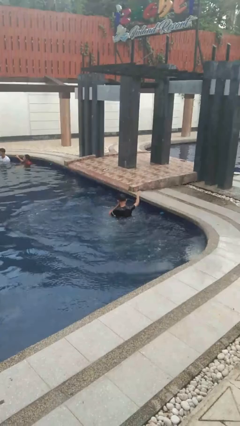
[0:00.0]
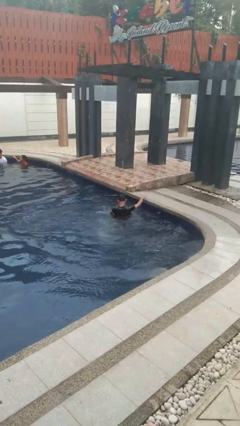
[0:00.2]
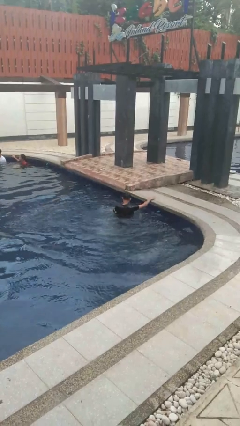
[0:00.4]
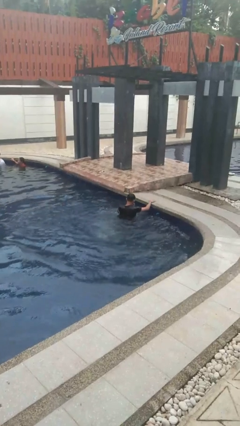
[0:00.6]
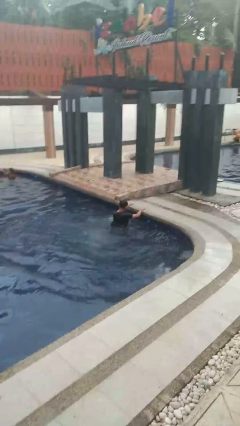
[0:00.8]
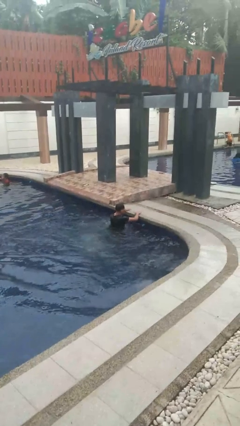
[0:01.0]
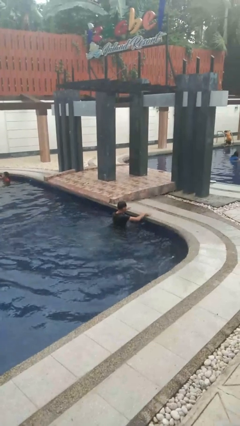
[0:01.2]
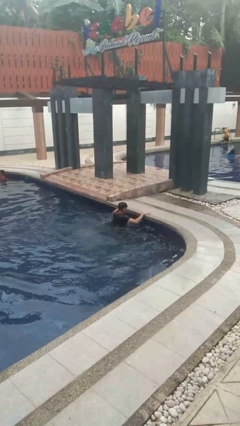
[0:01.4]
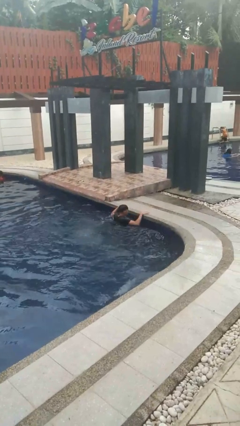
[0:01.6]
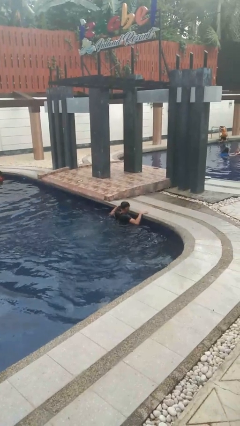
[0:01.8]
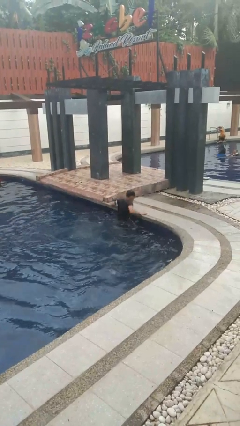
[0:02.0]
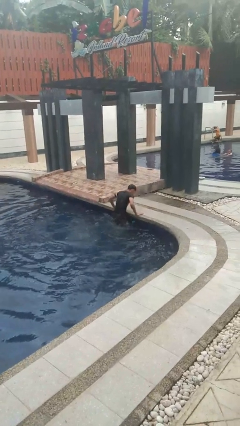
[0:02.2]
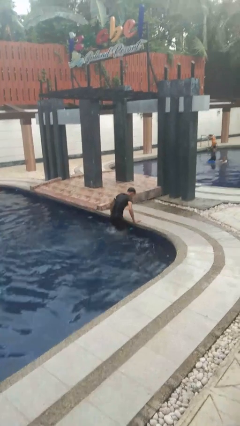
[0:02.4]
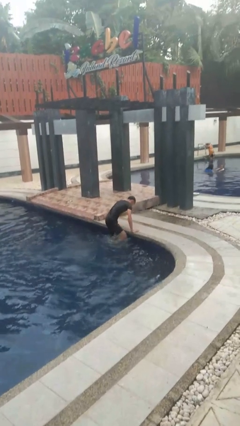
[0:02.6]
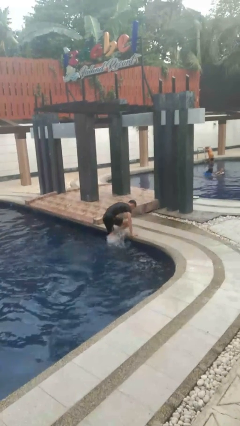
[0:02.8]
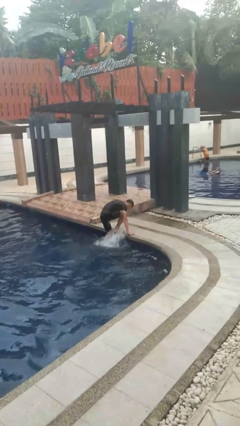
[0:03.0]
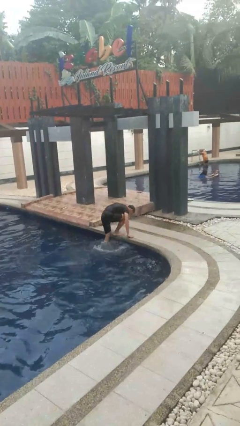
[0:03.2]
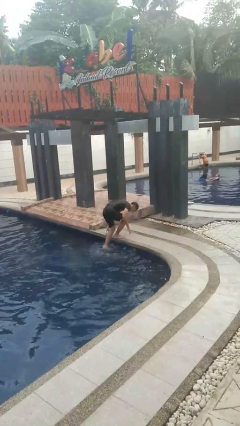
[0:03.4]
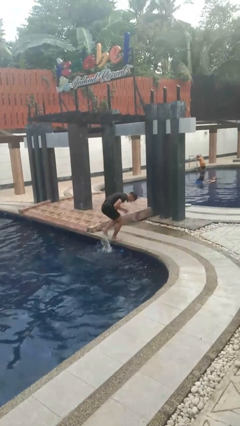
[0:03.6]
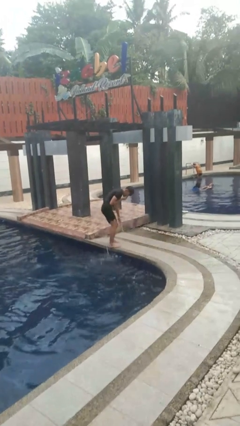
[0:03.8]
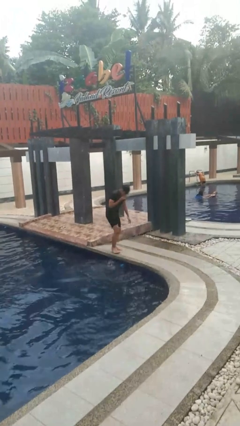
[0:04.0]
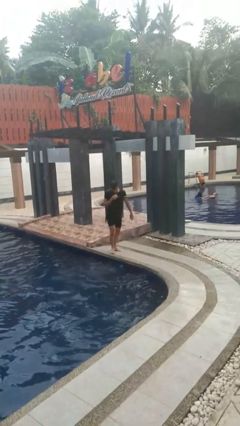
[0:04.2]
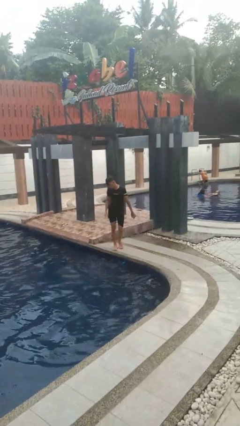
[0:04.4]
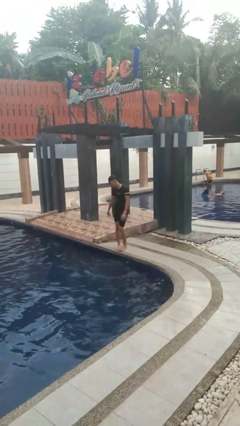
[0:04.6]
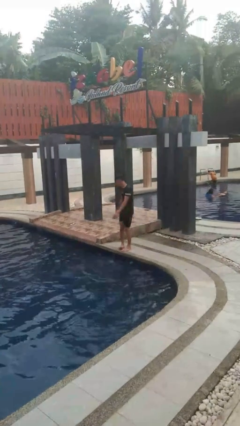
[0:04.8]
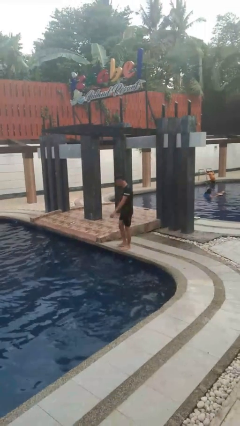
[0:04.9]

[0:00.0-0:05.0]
person exits pool

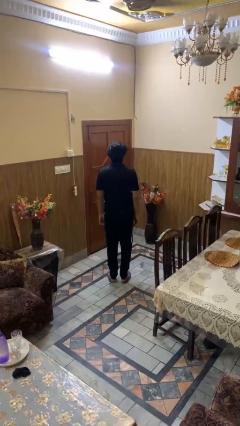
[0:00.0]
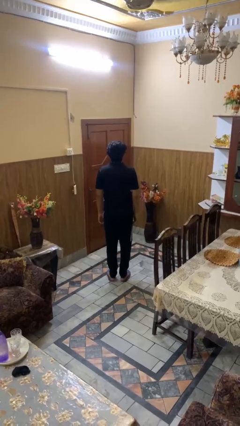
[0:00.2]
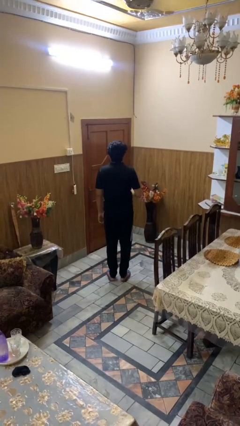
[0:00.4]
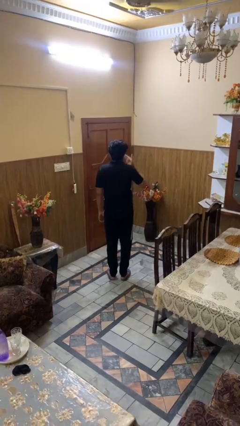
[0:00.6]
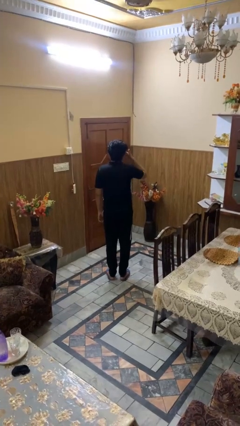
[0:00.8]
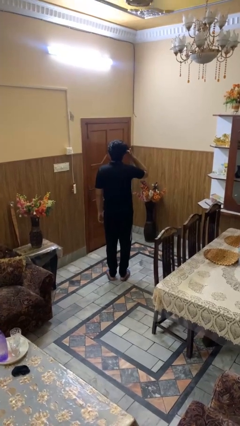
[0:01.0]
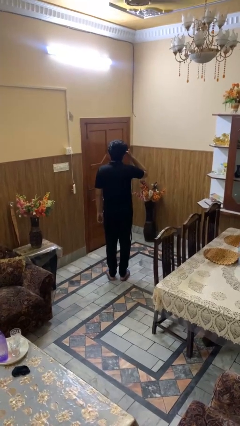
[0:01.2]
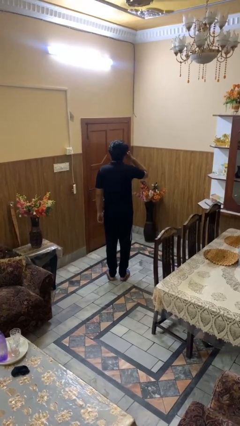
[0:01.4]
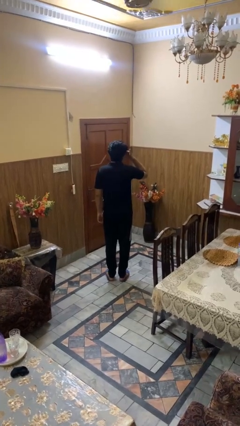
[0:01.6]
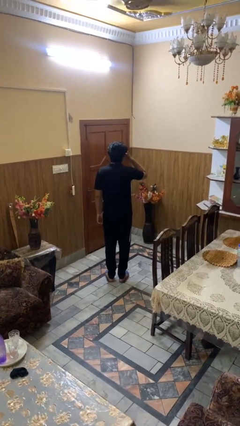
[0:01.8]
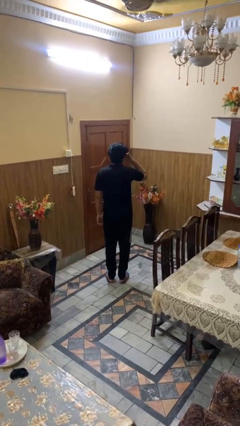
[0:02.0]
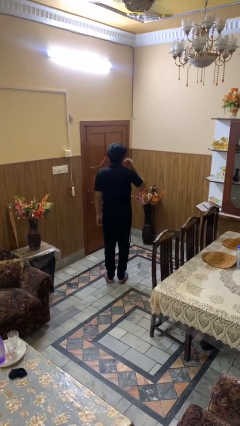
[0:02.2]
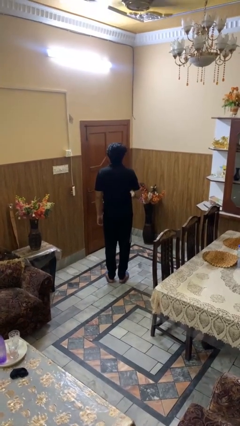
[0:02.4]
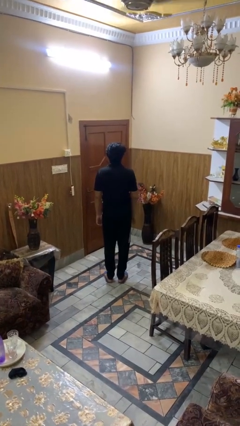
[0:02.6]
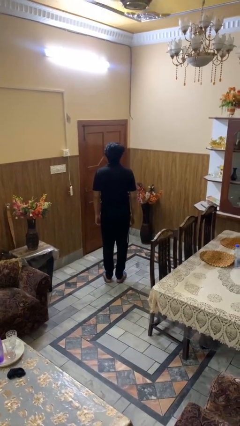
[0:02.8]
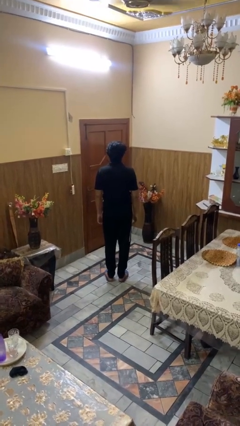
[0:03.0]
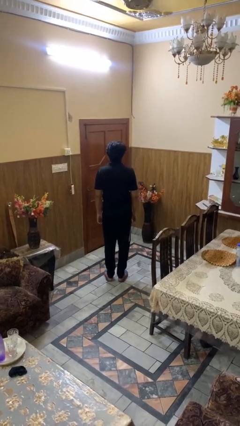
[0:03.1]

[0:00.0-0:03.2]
person rubs eyes

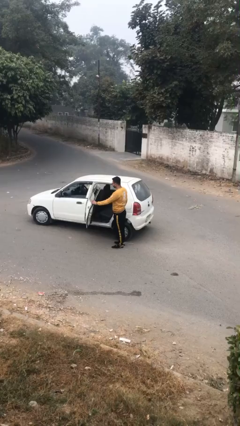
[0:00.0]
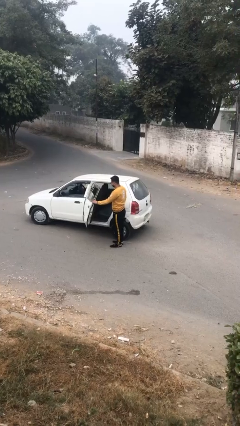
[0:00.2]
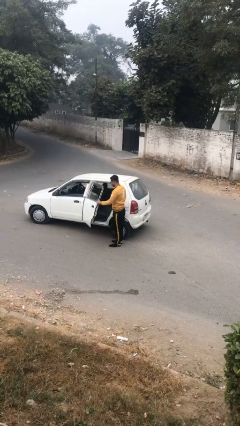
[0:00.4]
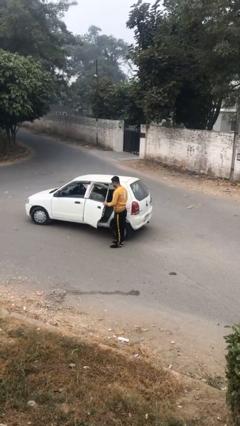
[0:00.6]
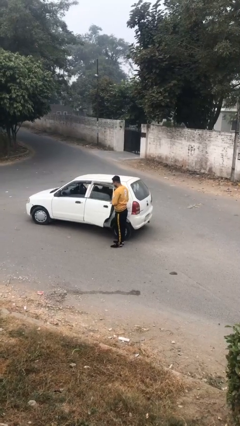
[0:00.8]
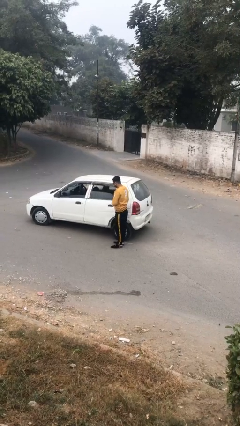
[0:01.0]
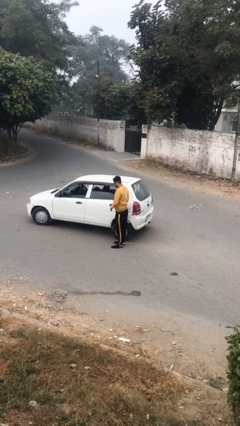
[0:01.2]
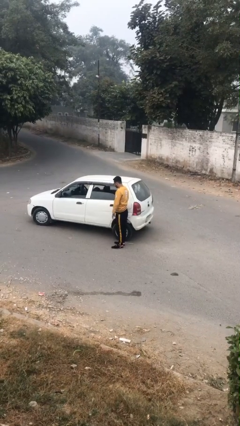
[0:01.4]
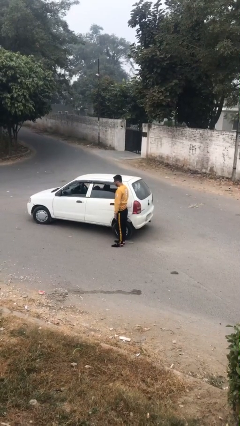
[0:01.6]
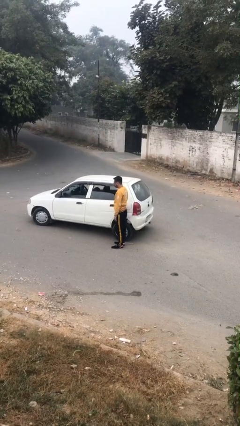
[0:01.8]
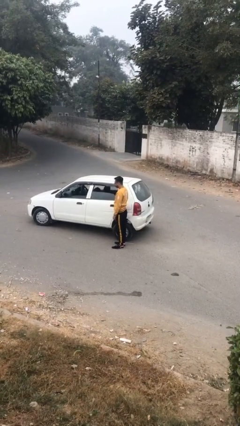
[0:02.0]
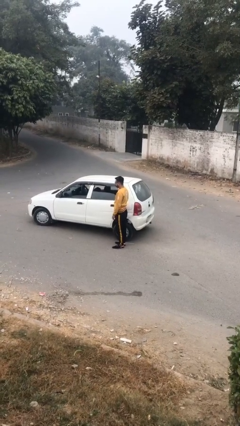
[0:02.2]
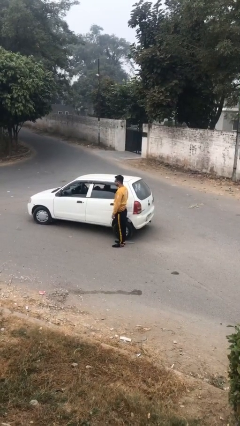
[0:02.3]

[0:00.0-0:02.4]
person closes car door

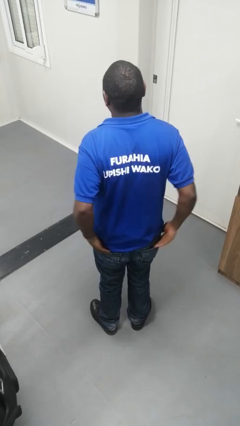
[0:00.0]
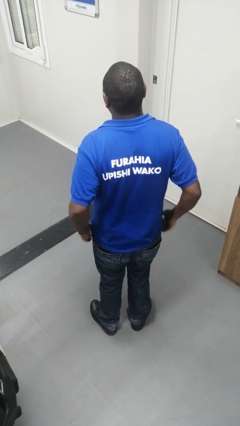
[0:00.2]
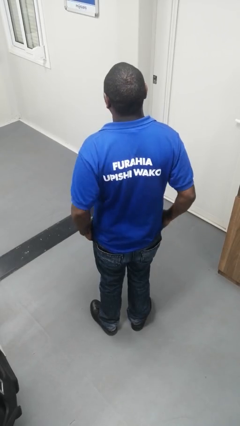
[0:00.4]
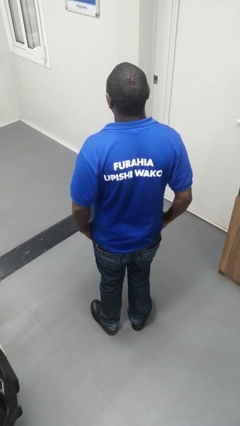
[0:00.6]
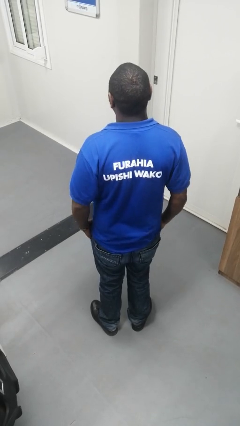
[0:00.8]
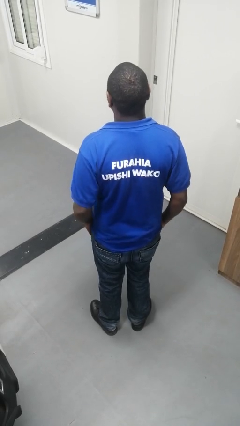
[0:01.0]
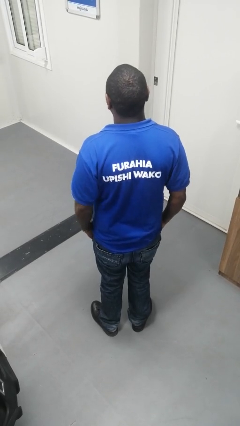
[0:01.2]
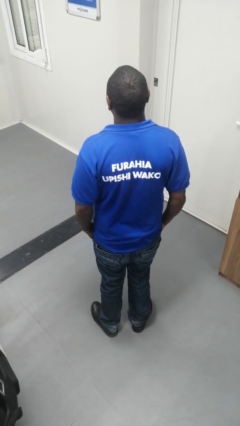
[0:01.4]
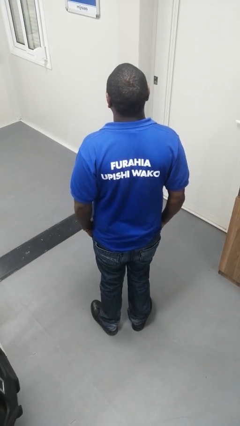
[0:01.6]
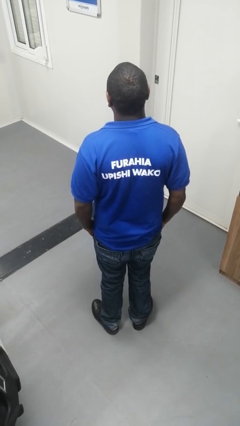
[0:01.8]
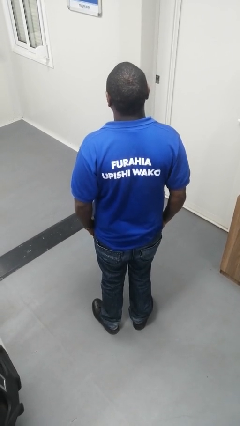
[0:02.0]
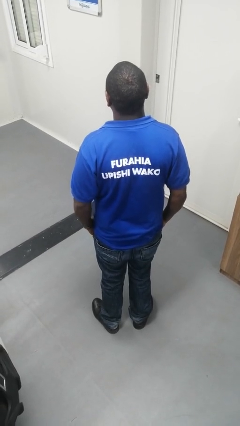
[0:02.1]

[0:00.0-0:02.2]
person puts hands in back pockets

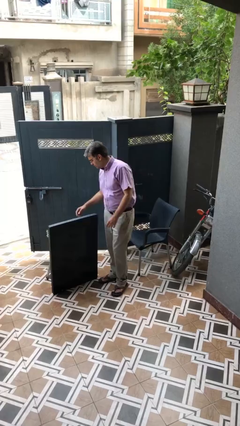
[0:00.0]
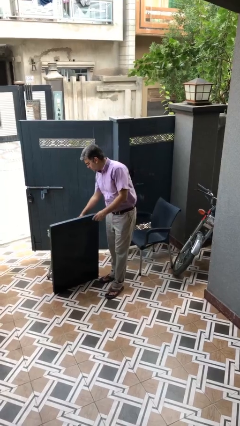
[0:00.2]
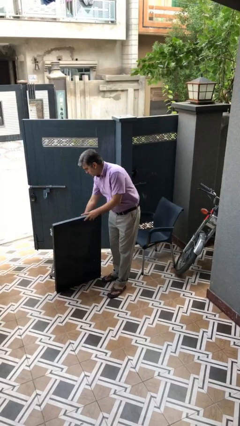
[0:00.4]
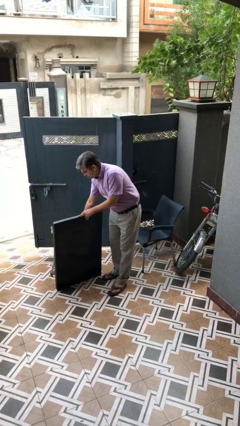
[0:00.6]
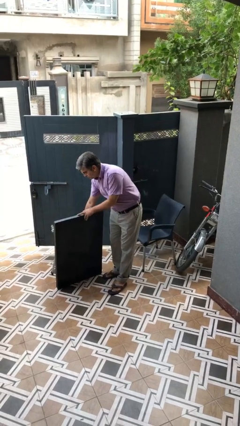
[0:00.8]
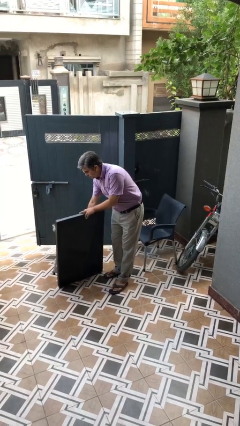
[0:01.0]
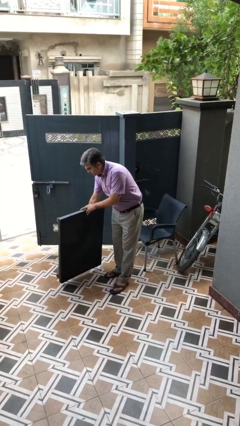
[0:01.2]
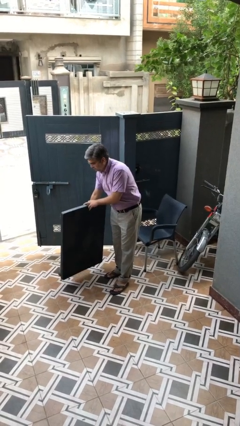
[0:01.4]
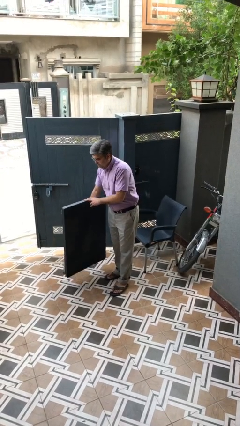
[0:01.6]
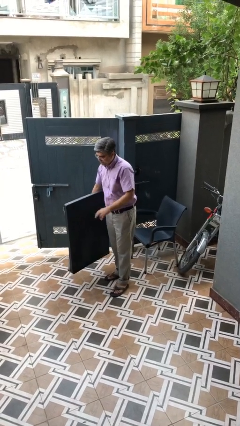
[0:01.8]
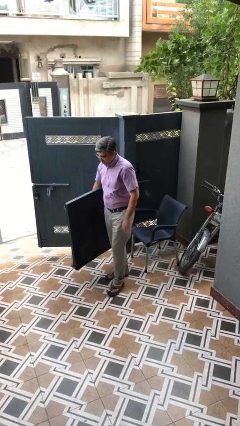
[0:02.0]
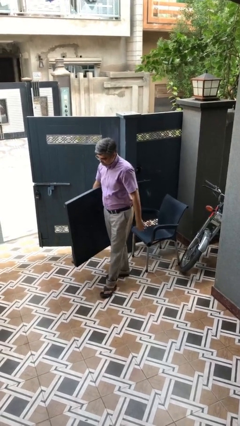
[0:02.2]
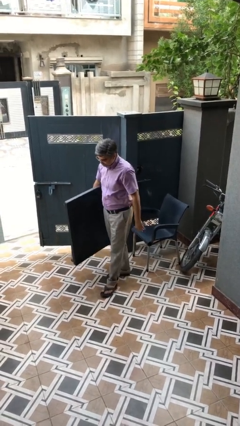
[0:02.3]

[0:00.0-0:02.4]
person picks up object from floor

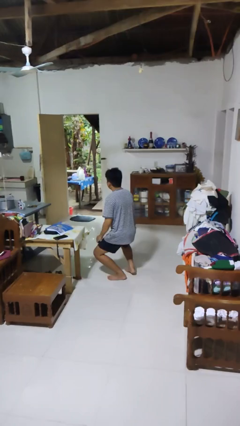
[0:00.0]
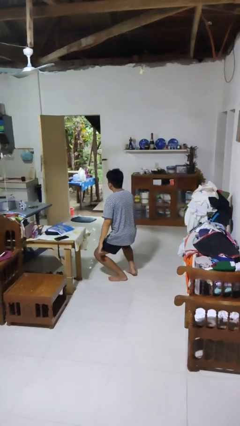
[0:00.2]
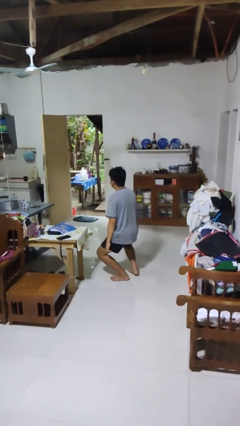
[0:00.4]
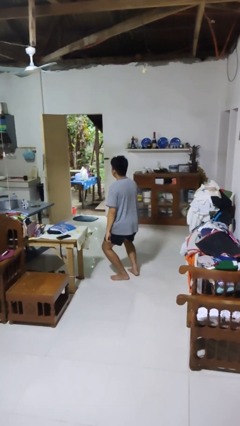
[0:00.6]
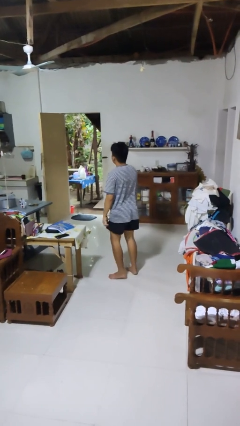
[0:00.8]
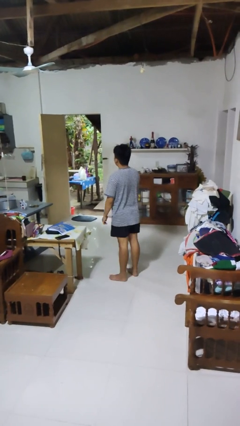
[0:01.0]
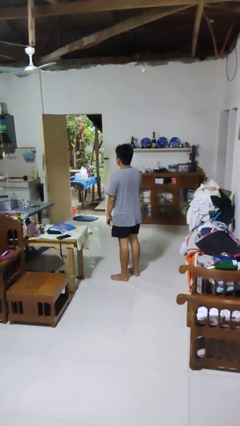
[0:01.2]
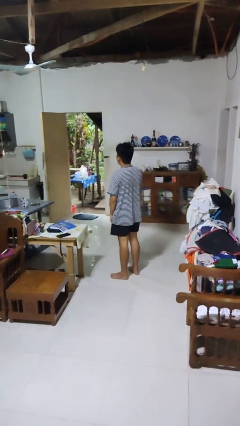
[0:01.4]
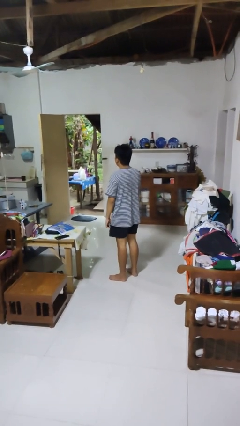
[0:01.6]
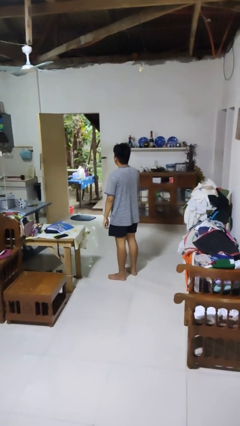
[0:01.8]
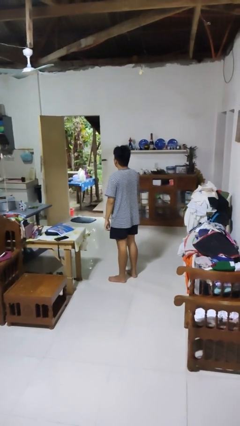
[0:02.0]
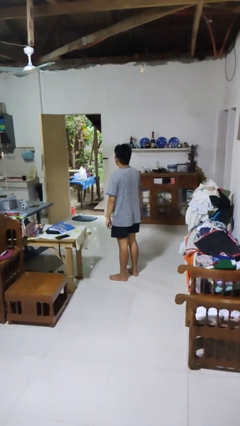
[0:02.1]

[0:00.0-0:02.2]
person stands up
